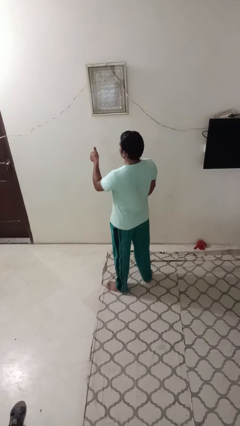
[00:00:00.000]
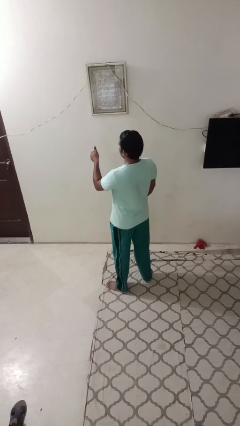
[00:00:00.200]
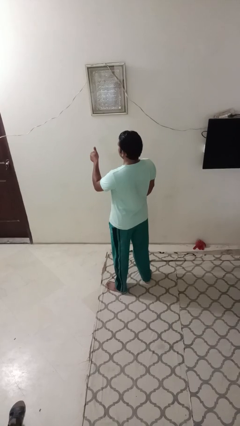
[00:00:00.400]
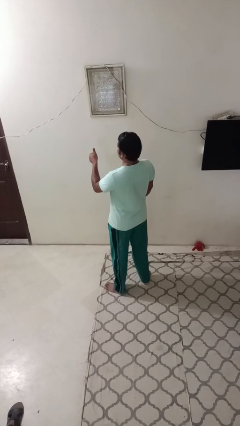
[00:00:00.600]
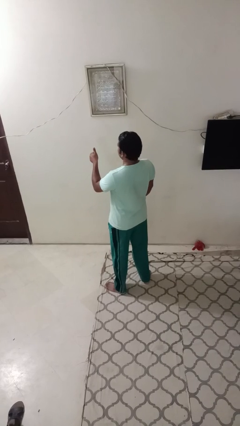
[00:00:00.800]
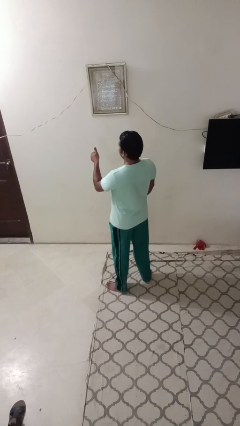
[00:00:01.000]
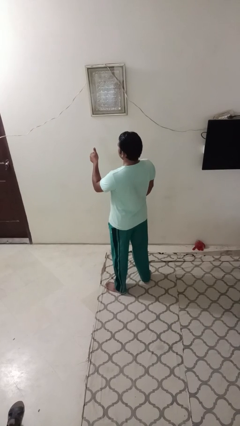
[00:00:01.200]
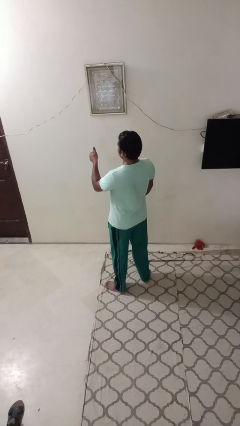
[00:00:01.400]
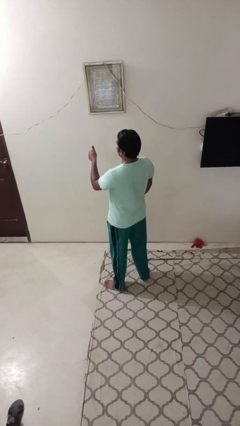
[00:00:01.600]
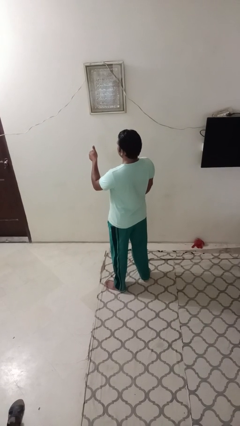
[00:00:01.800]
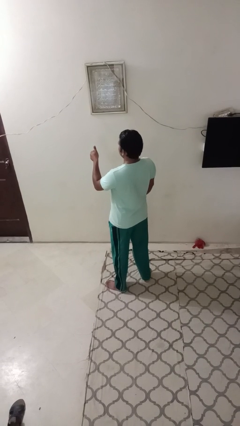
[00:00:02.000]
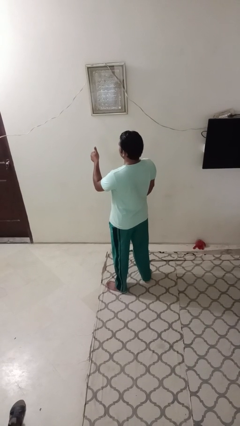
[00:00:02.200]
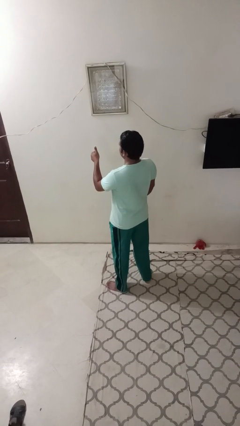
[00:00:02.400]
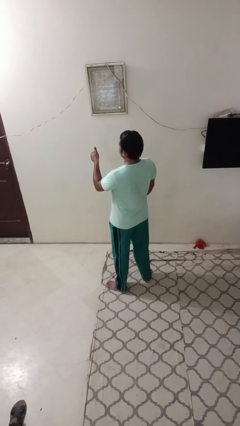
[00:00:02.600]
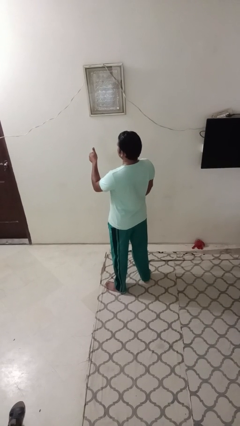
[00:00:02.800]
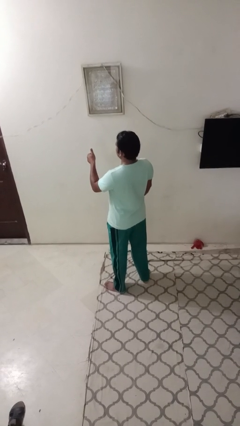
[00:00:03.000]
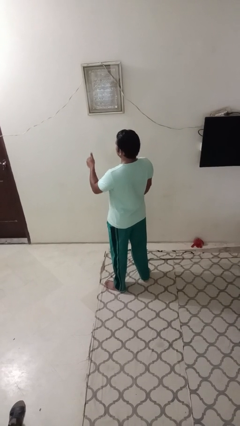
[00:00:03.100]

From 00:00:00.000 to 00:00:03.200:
person gestures thumbs up

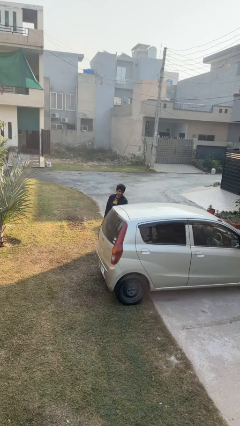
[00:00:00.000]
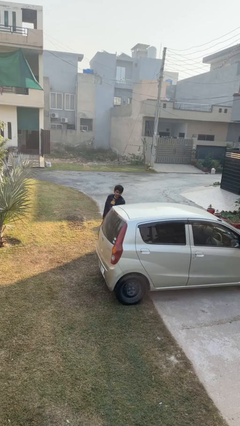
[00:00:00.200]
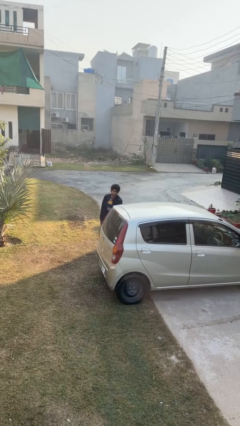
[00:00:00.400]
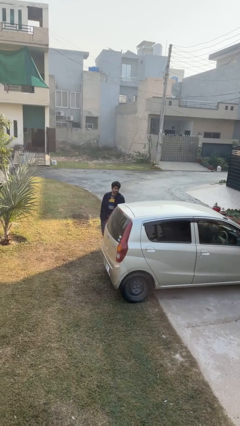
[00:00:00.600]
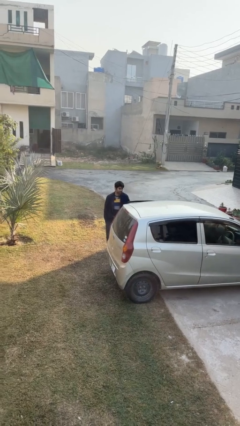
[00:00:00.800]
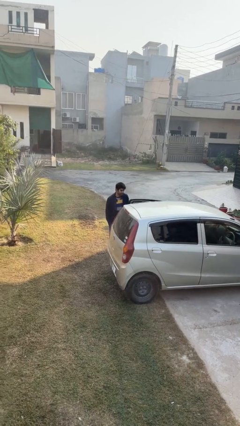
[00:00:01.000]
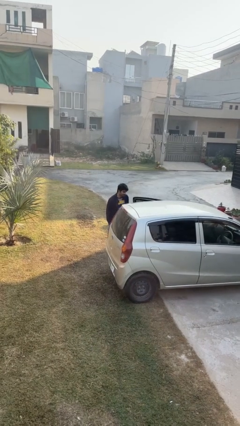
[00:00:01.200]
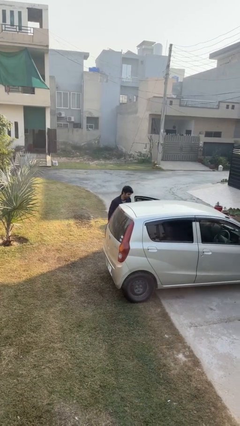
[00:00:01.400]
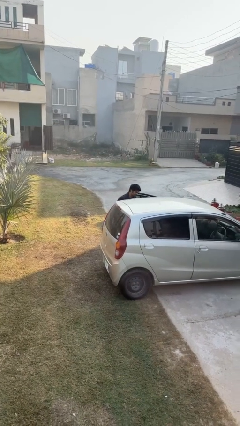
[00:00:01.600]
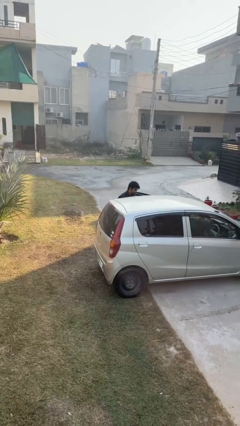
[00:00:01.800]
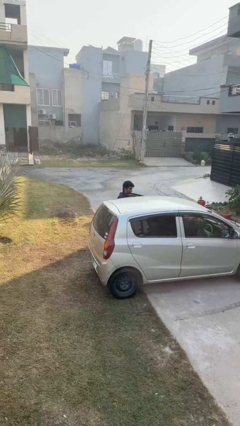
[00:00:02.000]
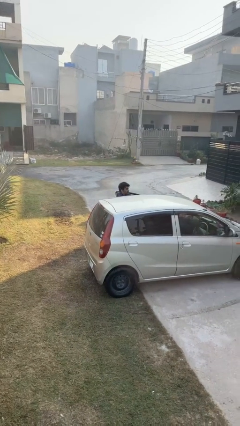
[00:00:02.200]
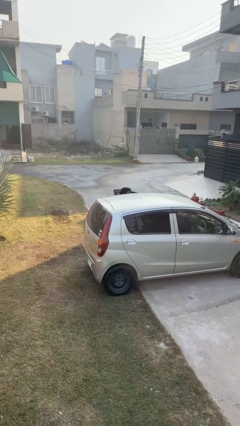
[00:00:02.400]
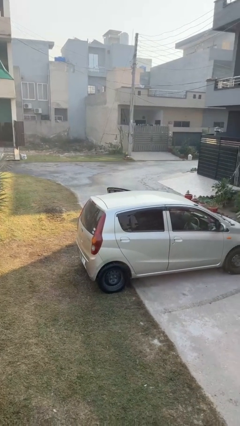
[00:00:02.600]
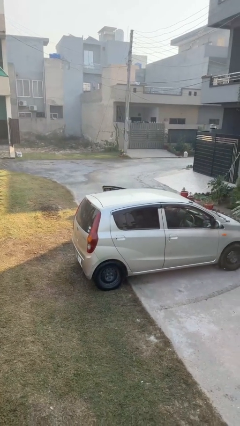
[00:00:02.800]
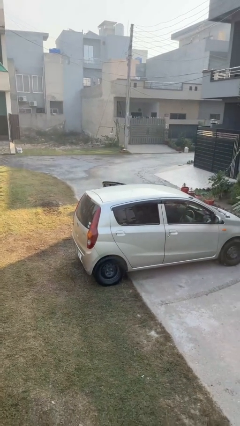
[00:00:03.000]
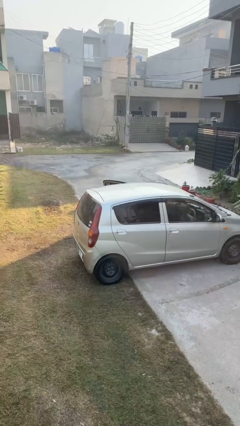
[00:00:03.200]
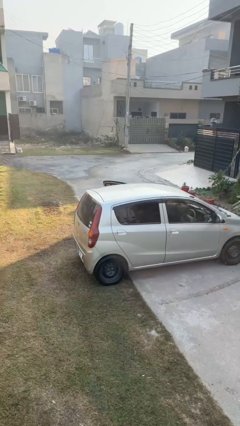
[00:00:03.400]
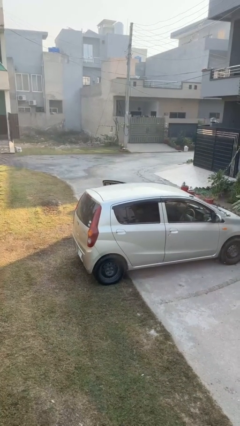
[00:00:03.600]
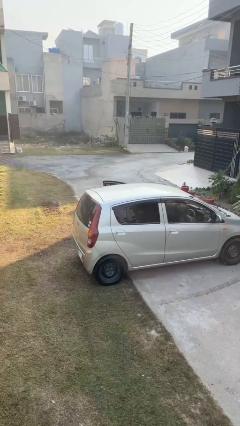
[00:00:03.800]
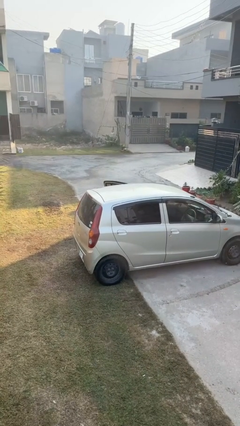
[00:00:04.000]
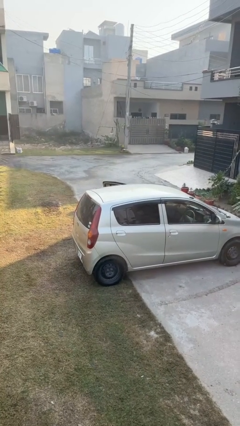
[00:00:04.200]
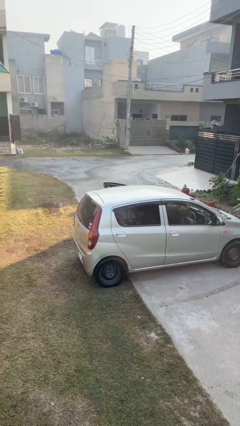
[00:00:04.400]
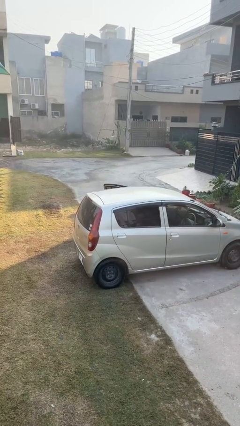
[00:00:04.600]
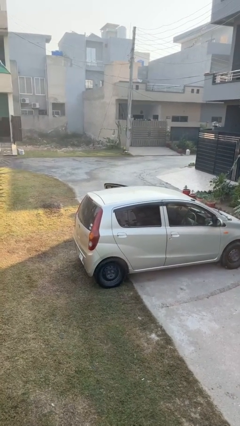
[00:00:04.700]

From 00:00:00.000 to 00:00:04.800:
person enters car

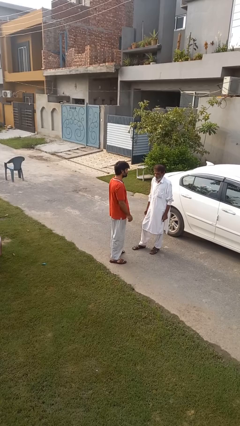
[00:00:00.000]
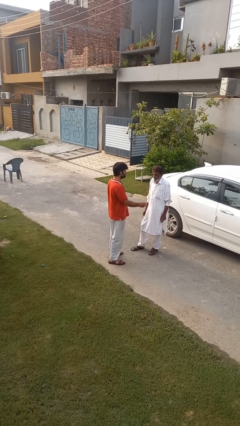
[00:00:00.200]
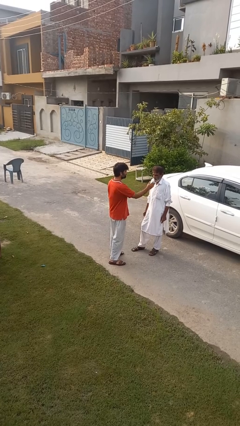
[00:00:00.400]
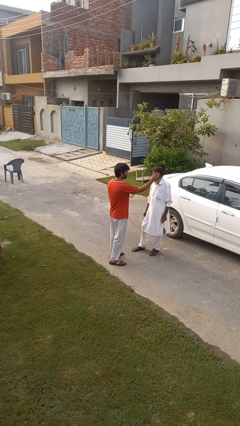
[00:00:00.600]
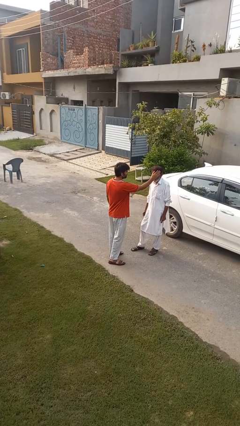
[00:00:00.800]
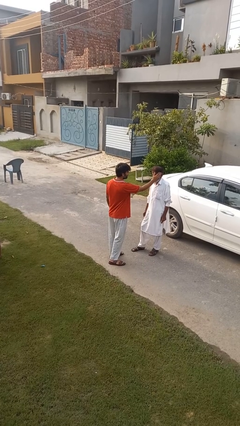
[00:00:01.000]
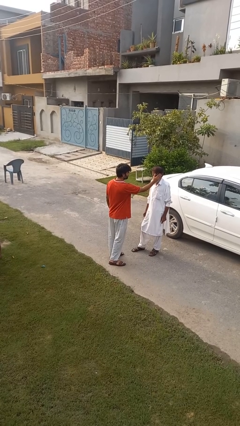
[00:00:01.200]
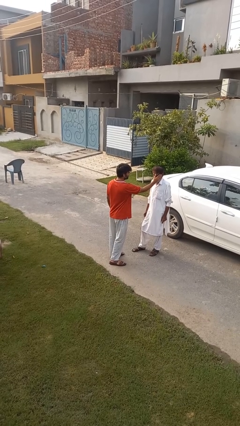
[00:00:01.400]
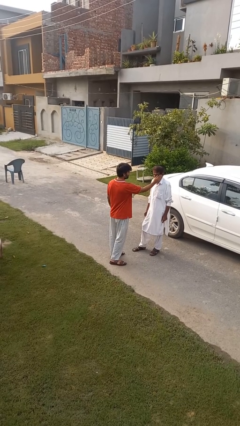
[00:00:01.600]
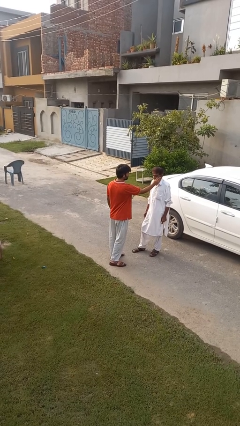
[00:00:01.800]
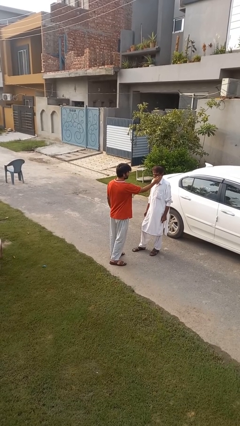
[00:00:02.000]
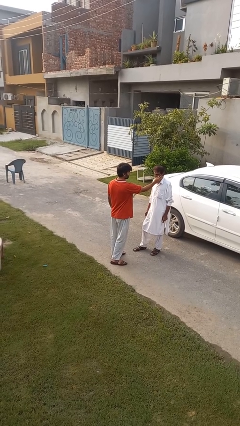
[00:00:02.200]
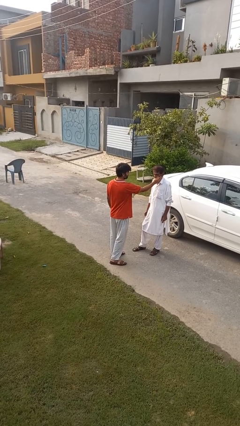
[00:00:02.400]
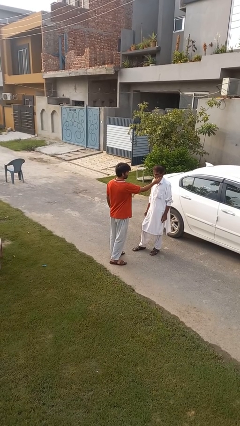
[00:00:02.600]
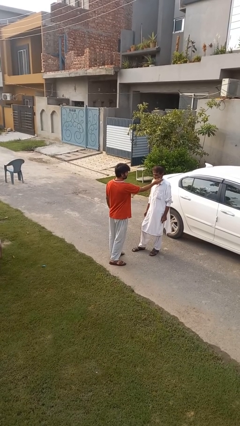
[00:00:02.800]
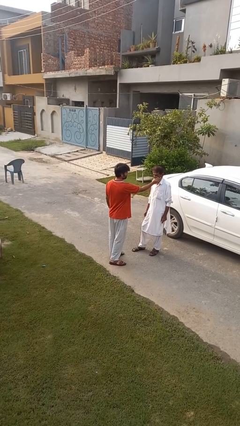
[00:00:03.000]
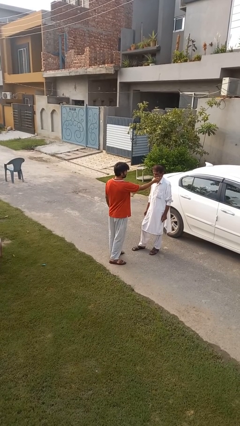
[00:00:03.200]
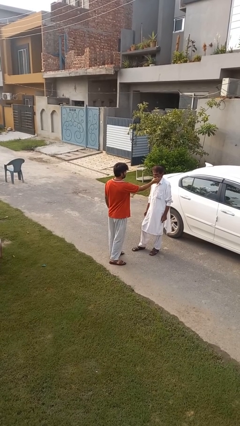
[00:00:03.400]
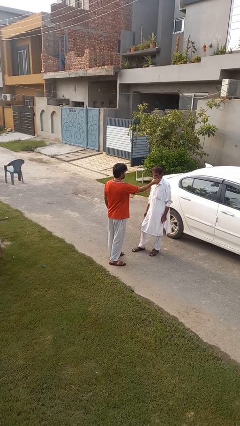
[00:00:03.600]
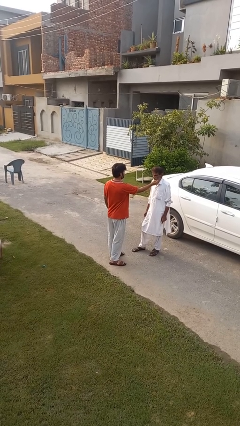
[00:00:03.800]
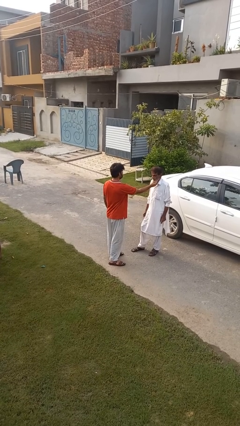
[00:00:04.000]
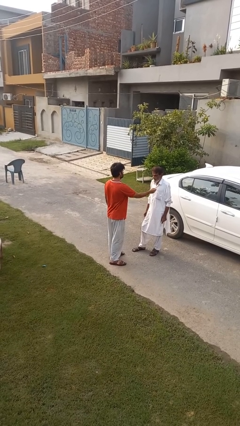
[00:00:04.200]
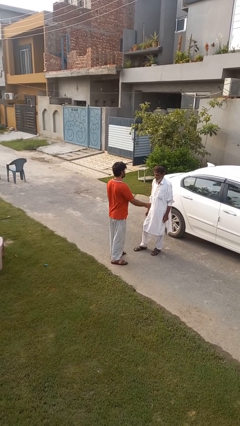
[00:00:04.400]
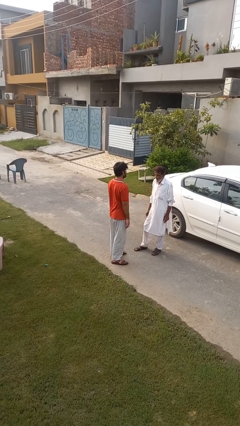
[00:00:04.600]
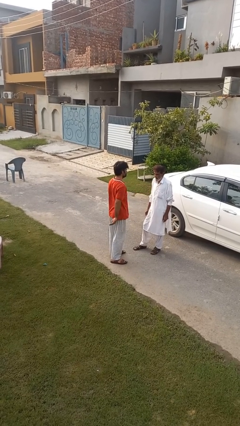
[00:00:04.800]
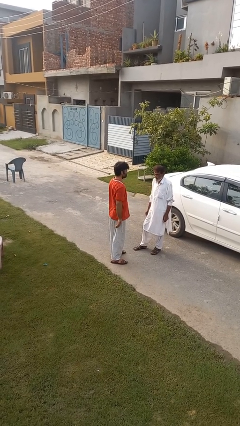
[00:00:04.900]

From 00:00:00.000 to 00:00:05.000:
person touches face of person

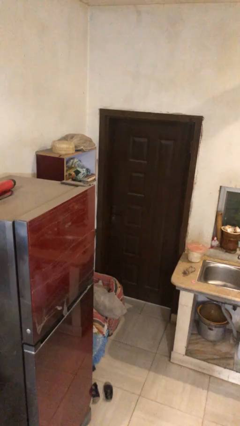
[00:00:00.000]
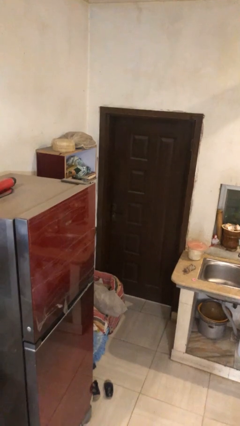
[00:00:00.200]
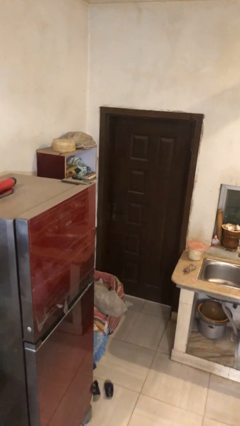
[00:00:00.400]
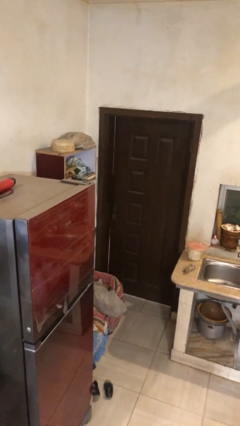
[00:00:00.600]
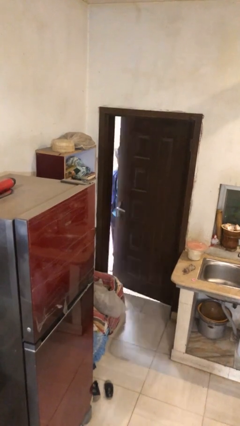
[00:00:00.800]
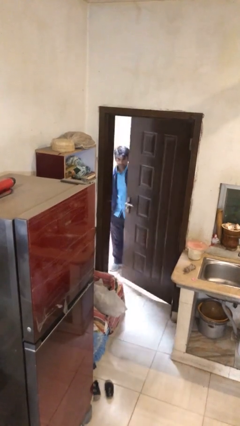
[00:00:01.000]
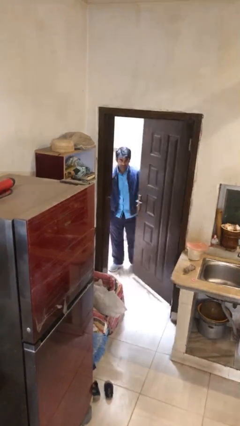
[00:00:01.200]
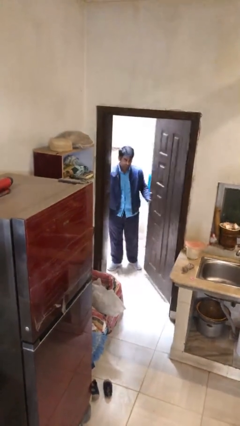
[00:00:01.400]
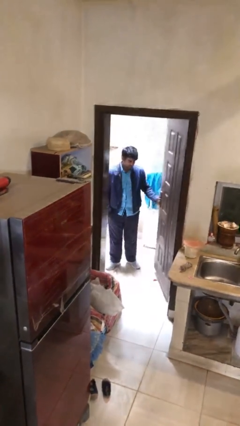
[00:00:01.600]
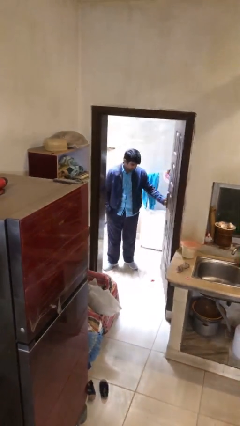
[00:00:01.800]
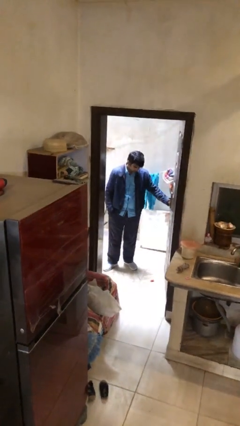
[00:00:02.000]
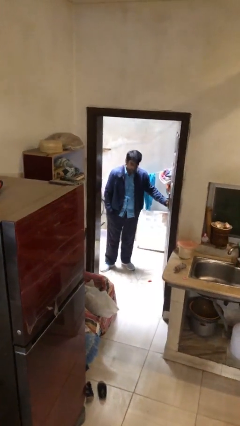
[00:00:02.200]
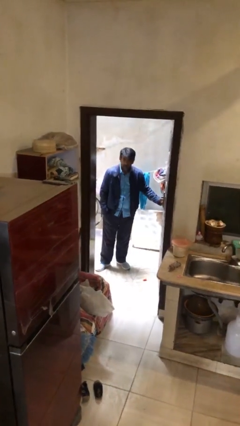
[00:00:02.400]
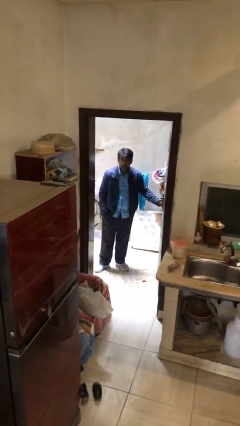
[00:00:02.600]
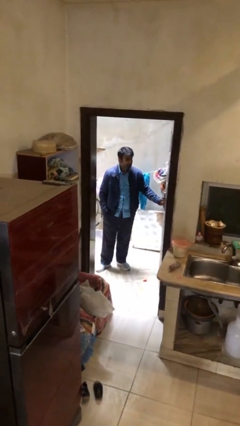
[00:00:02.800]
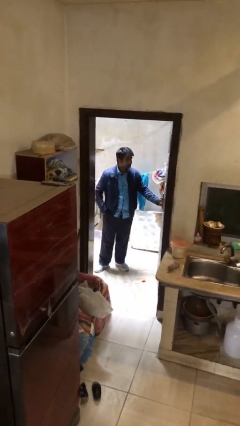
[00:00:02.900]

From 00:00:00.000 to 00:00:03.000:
person opens facility door

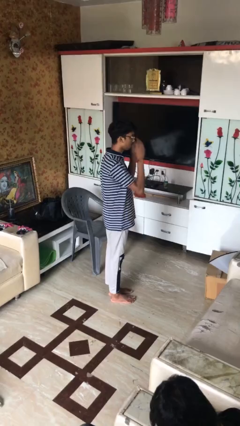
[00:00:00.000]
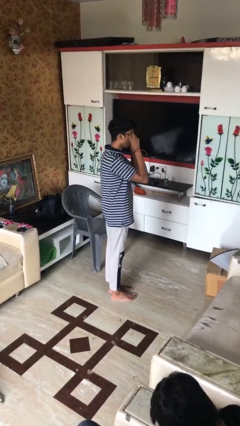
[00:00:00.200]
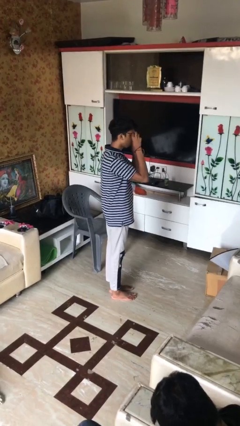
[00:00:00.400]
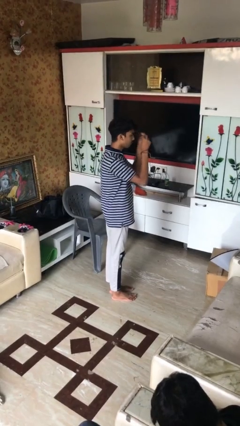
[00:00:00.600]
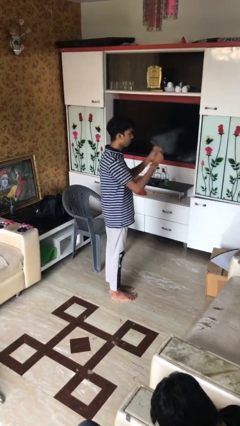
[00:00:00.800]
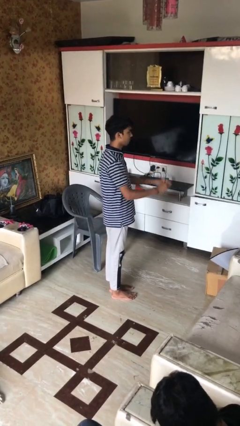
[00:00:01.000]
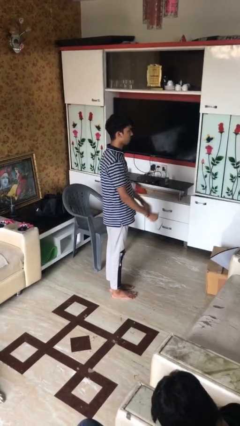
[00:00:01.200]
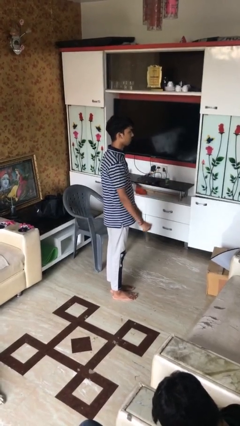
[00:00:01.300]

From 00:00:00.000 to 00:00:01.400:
person takes off glasses

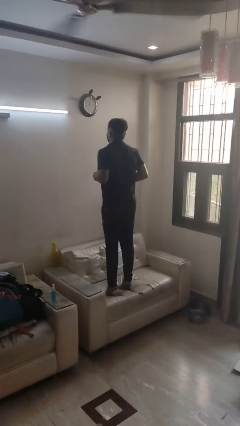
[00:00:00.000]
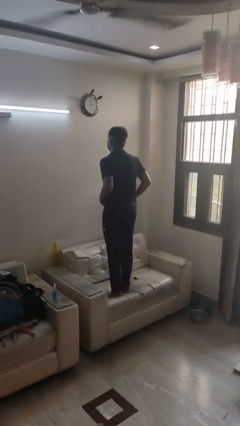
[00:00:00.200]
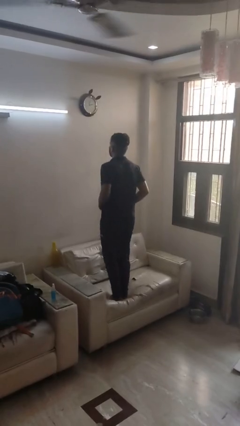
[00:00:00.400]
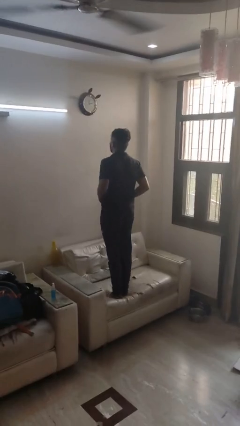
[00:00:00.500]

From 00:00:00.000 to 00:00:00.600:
person jumps on couch
